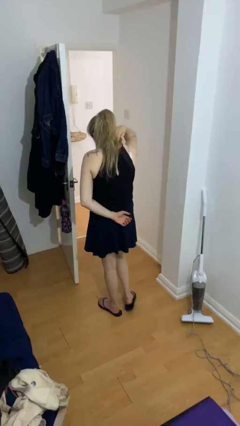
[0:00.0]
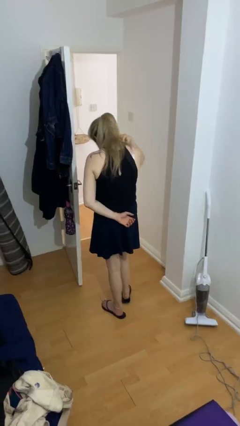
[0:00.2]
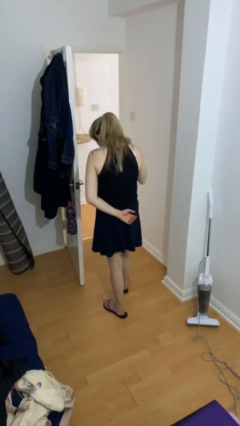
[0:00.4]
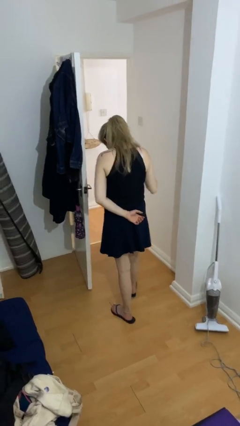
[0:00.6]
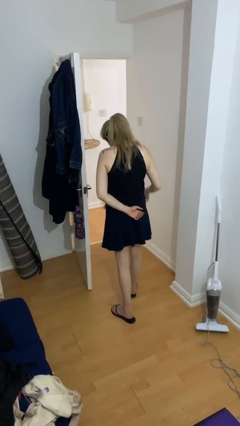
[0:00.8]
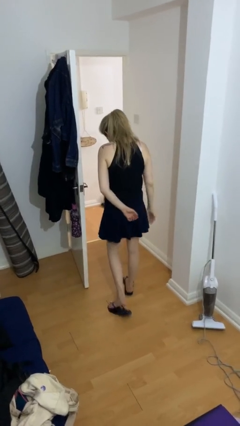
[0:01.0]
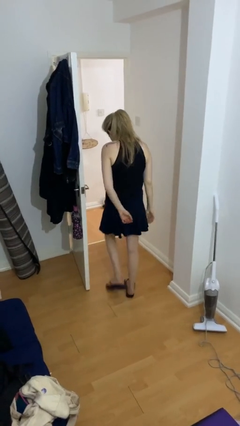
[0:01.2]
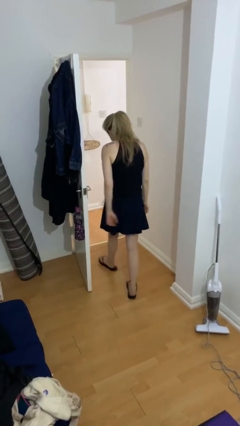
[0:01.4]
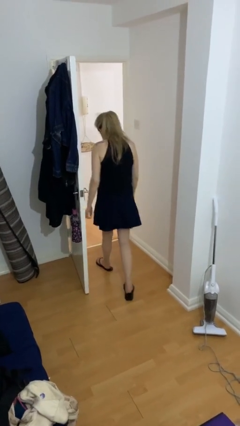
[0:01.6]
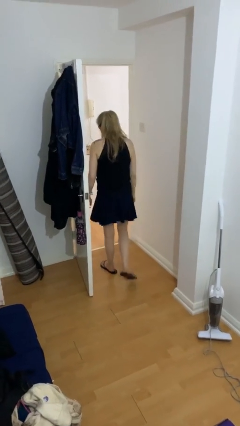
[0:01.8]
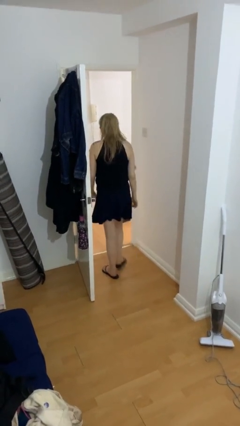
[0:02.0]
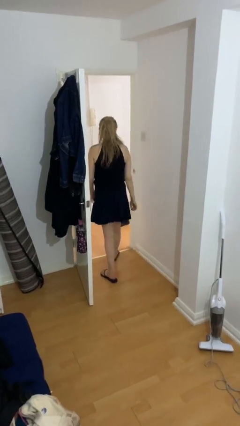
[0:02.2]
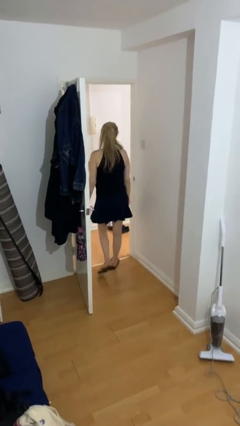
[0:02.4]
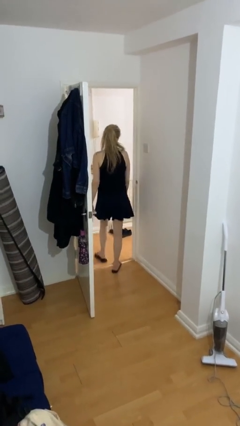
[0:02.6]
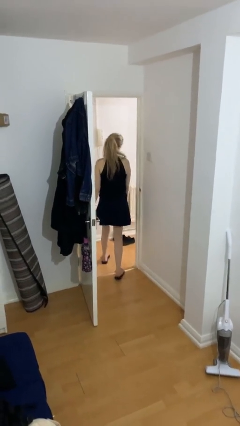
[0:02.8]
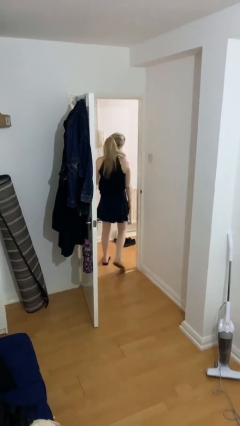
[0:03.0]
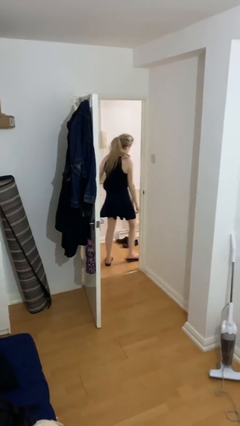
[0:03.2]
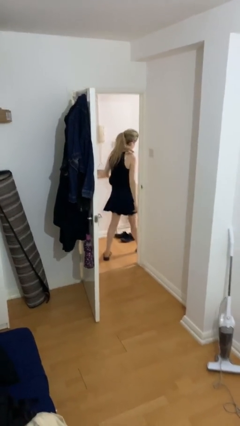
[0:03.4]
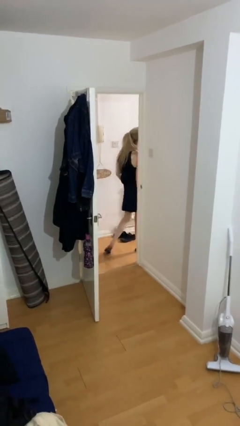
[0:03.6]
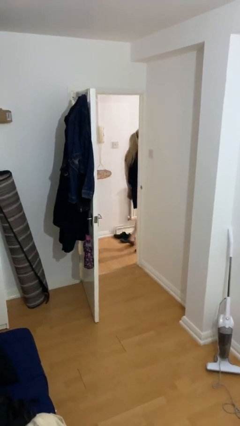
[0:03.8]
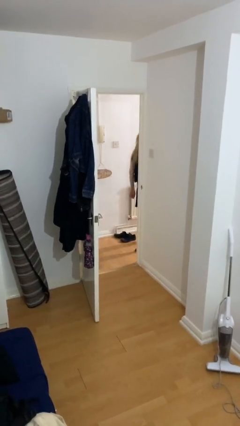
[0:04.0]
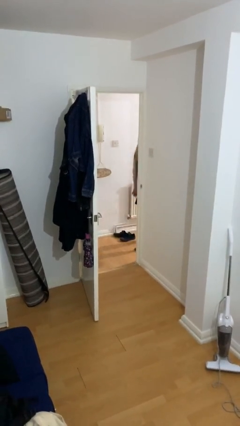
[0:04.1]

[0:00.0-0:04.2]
person exits scene through structure

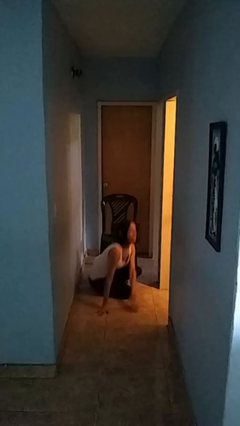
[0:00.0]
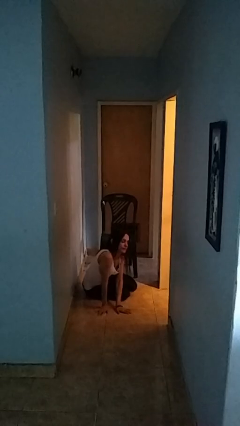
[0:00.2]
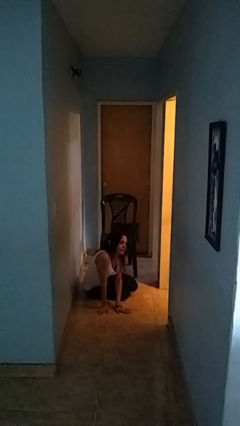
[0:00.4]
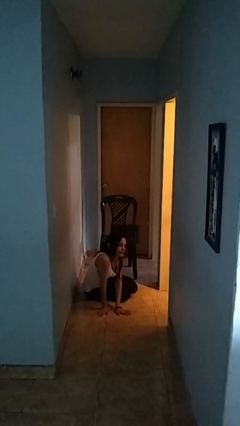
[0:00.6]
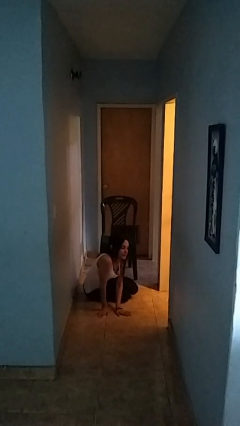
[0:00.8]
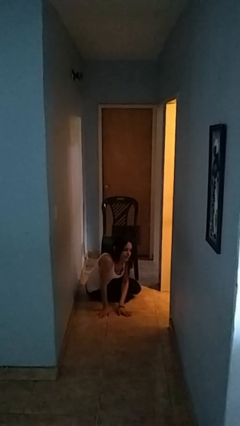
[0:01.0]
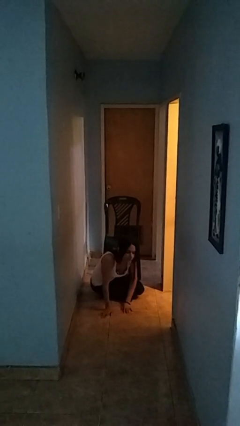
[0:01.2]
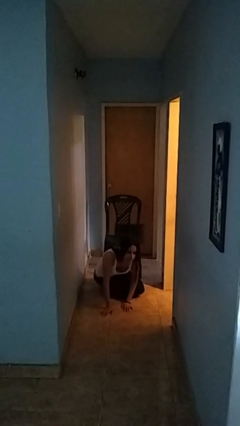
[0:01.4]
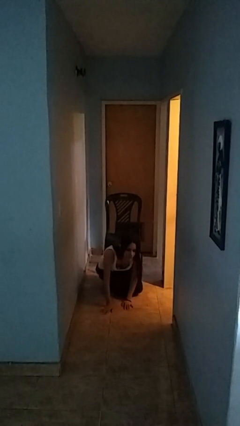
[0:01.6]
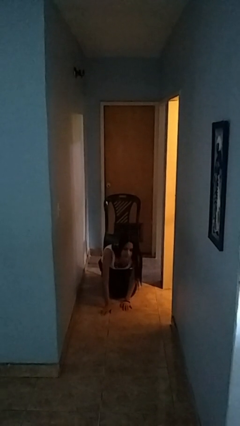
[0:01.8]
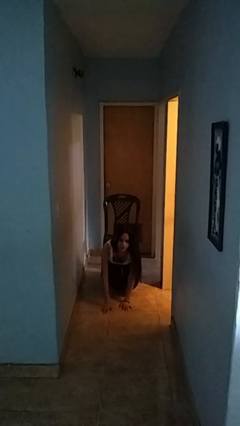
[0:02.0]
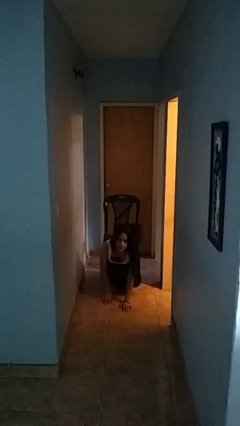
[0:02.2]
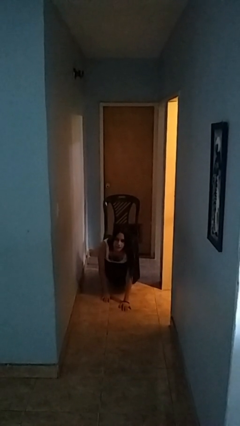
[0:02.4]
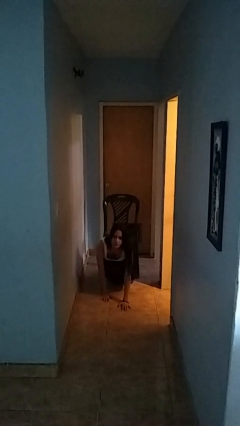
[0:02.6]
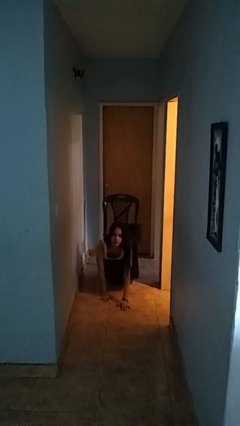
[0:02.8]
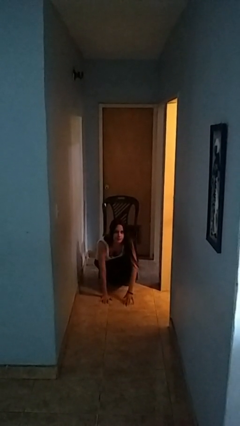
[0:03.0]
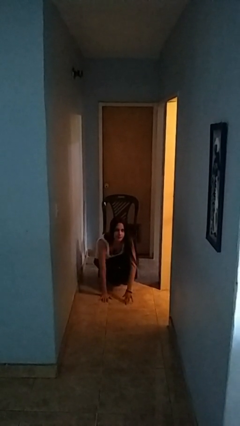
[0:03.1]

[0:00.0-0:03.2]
person falls from chair

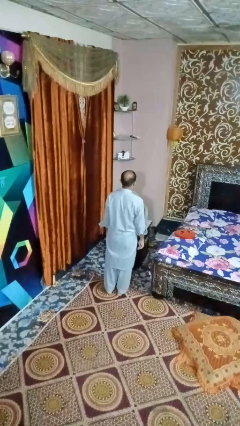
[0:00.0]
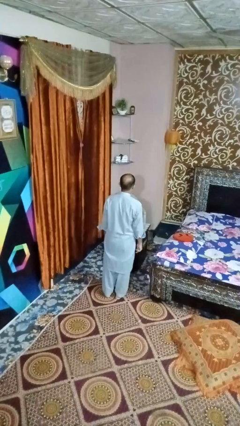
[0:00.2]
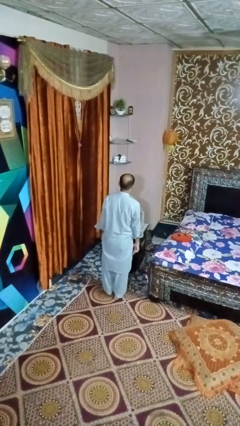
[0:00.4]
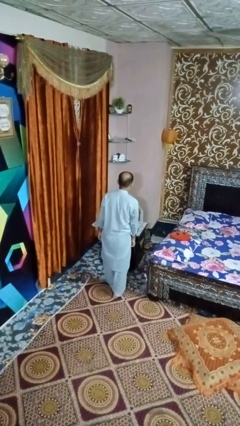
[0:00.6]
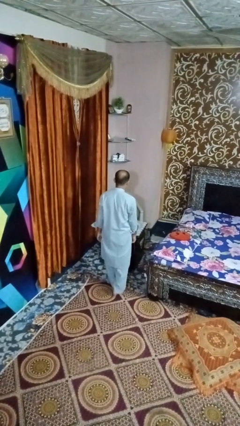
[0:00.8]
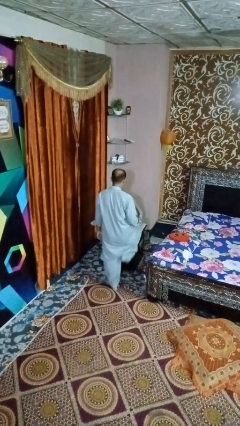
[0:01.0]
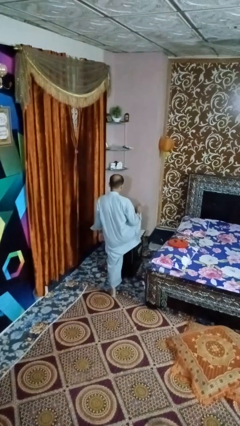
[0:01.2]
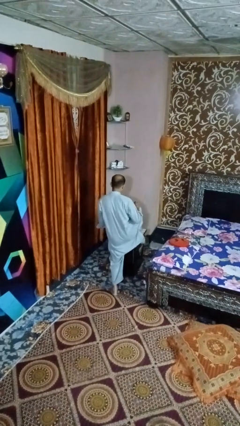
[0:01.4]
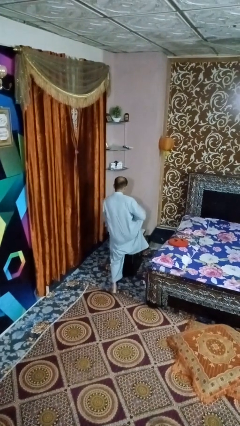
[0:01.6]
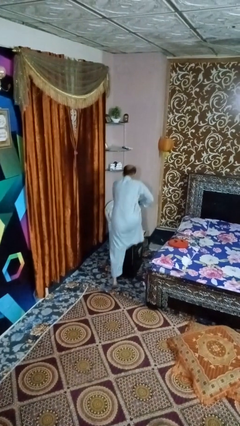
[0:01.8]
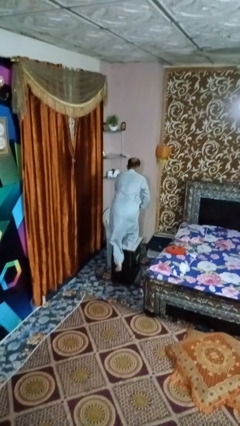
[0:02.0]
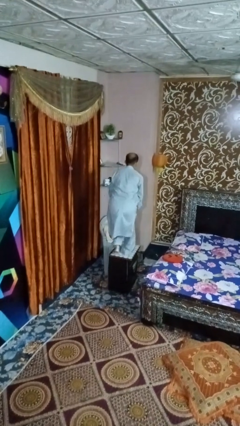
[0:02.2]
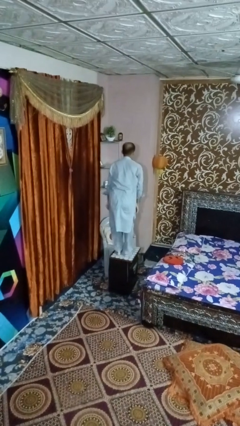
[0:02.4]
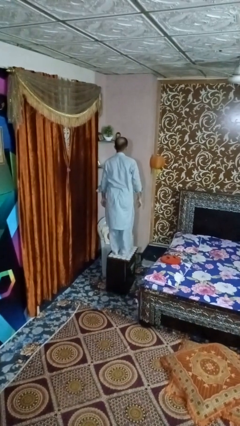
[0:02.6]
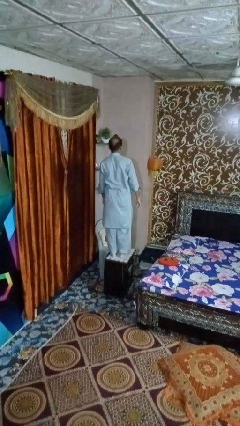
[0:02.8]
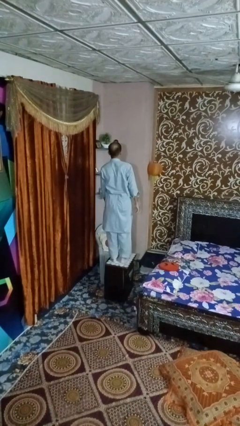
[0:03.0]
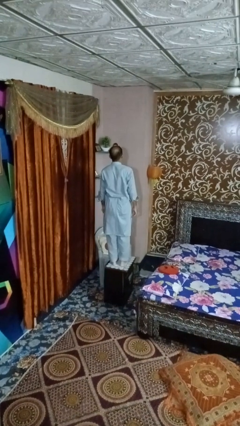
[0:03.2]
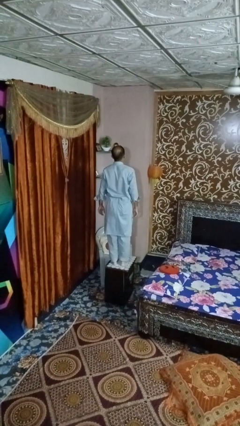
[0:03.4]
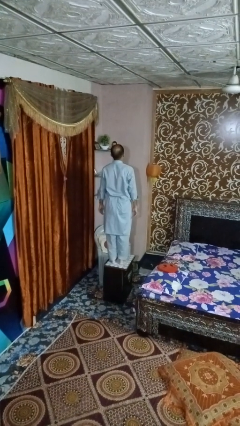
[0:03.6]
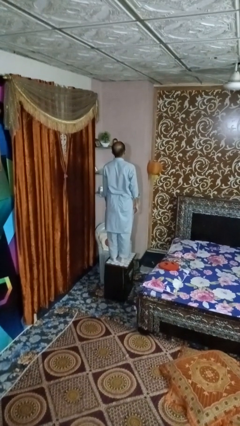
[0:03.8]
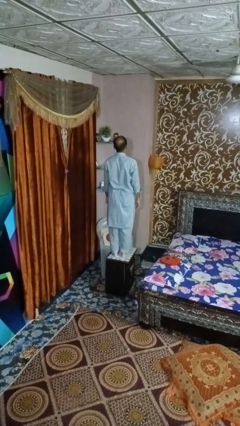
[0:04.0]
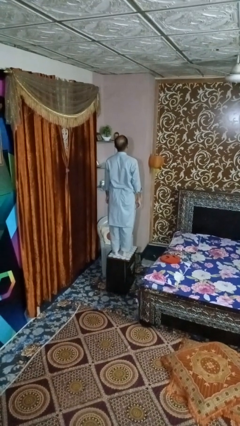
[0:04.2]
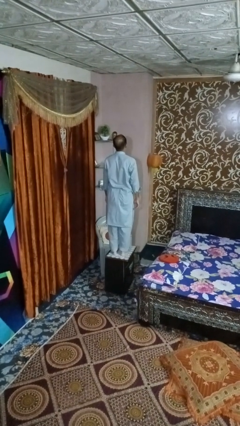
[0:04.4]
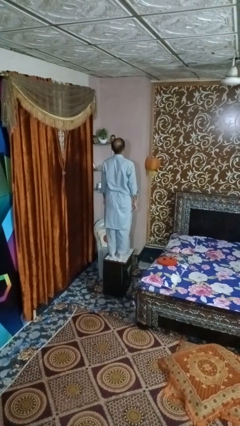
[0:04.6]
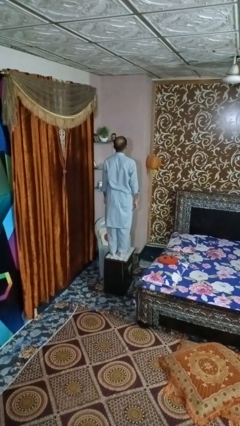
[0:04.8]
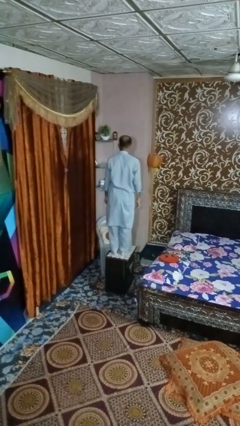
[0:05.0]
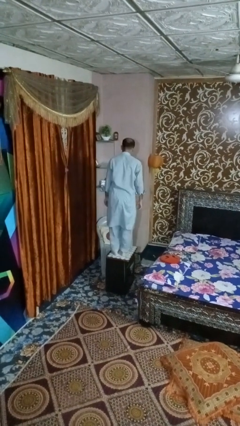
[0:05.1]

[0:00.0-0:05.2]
person climbs on table

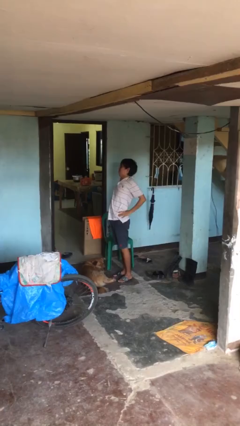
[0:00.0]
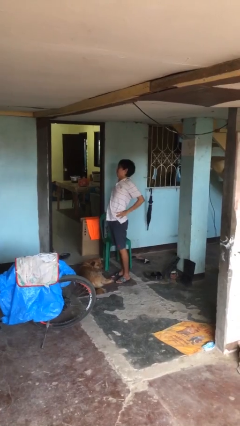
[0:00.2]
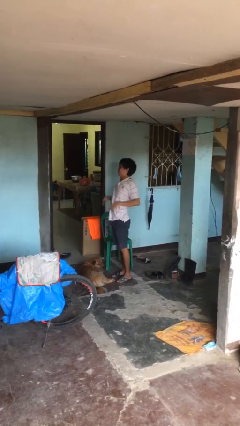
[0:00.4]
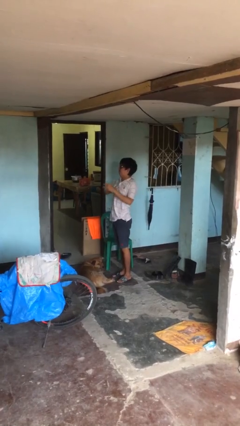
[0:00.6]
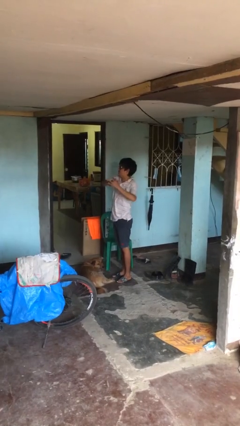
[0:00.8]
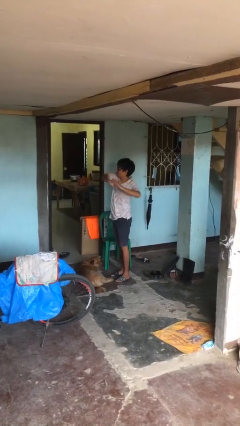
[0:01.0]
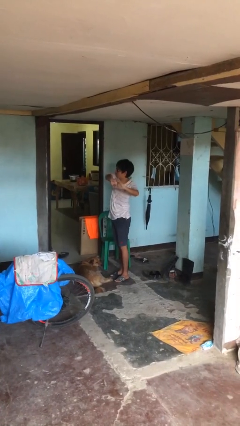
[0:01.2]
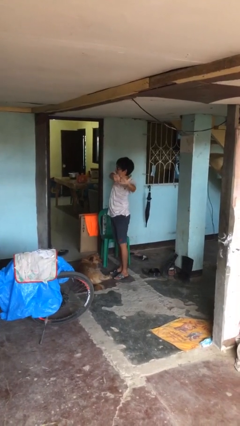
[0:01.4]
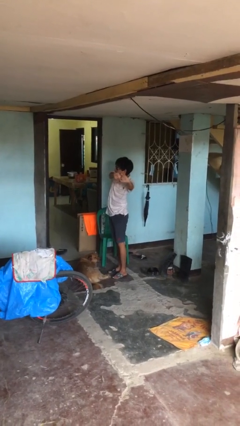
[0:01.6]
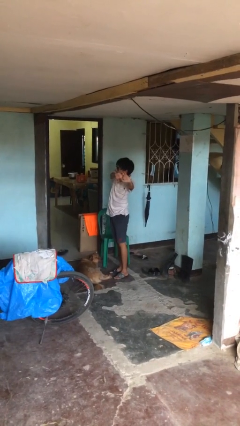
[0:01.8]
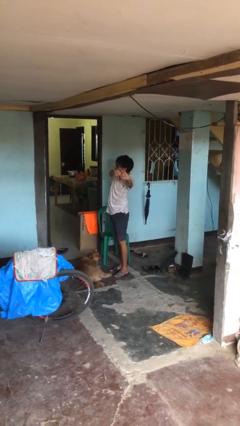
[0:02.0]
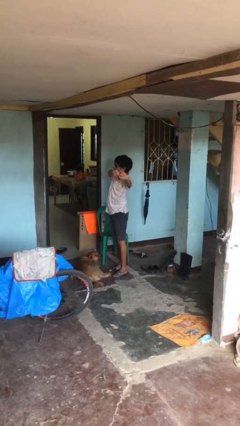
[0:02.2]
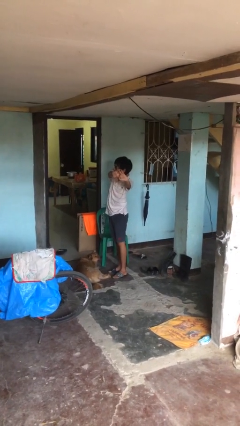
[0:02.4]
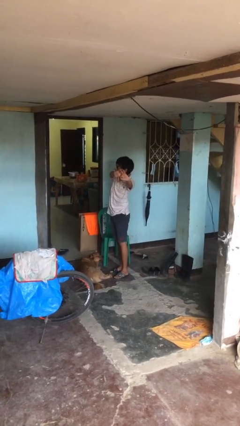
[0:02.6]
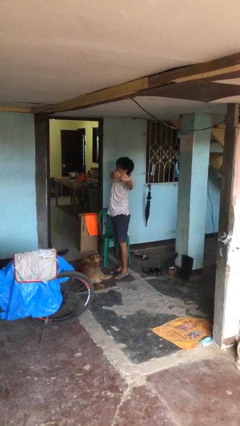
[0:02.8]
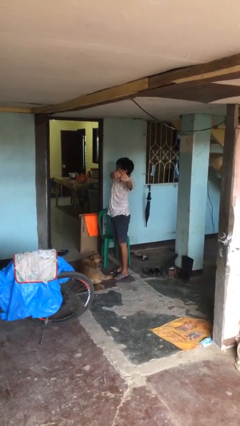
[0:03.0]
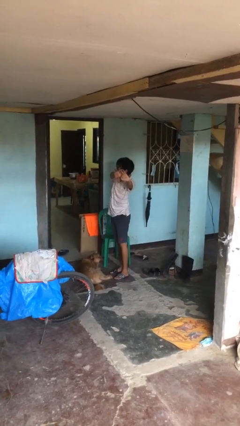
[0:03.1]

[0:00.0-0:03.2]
person stretches arms to side

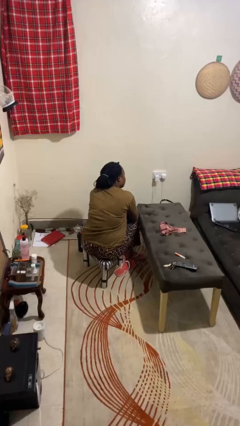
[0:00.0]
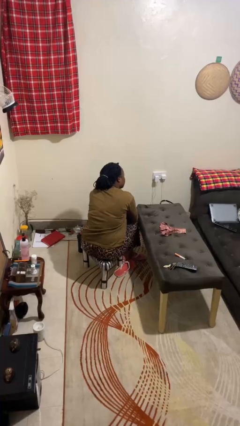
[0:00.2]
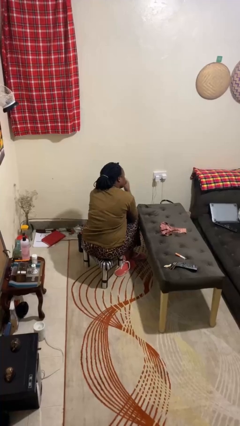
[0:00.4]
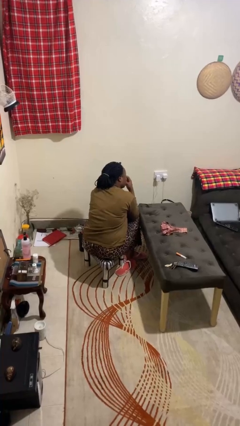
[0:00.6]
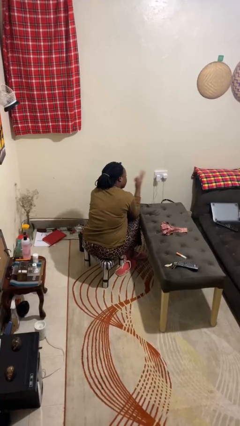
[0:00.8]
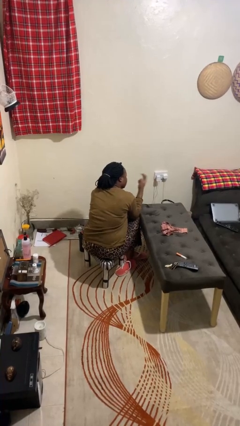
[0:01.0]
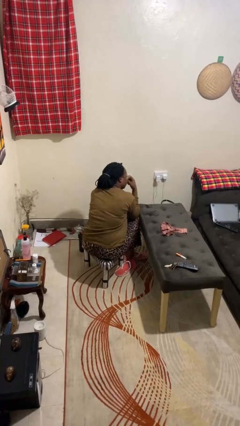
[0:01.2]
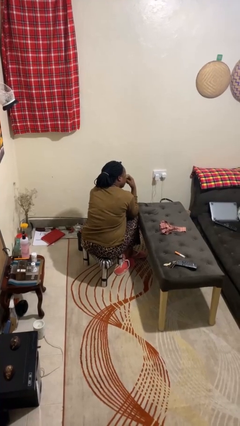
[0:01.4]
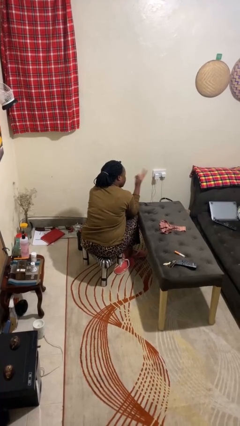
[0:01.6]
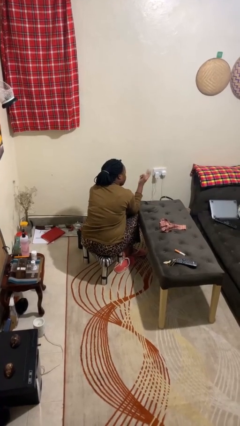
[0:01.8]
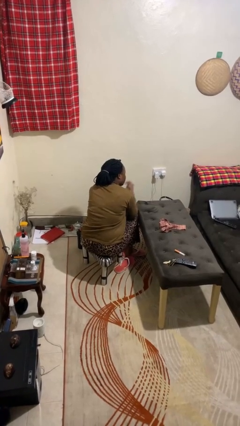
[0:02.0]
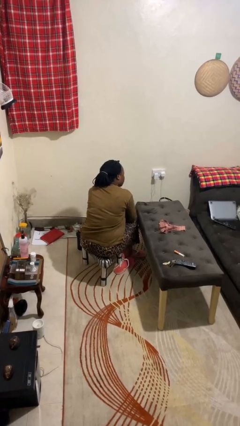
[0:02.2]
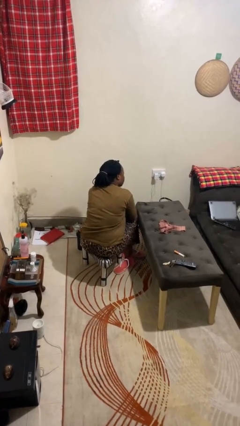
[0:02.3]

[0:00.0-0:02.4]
person gestures watch closely
